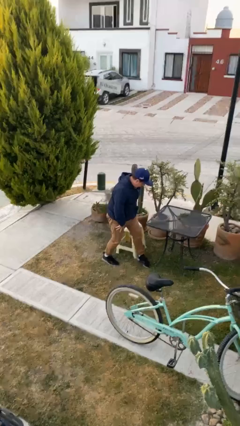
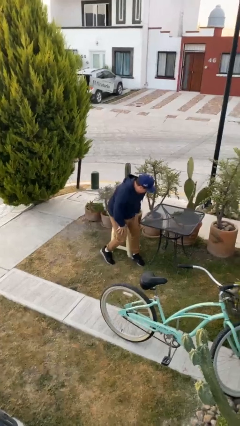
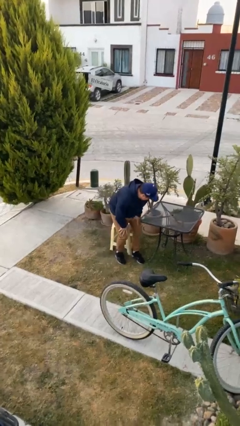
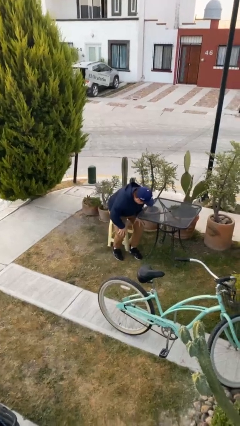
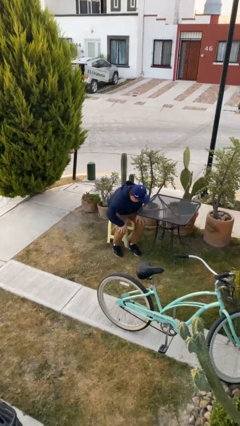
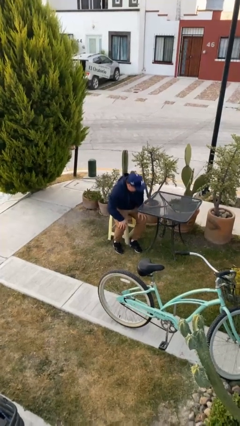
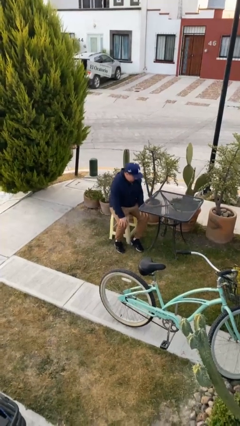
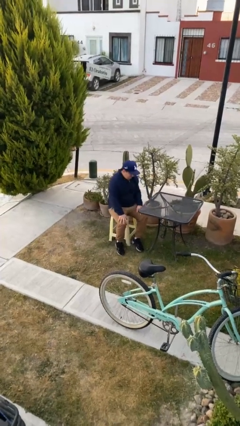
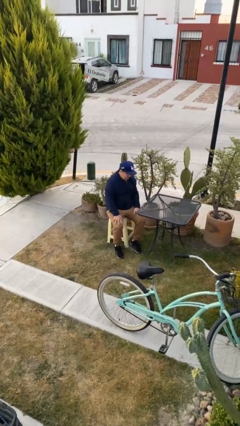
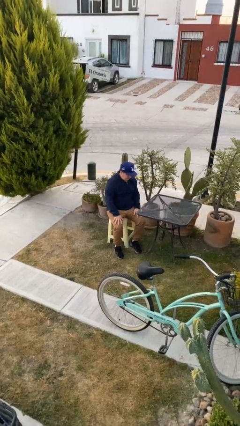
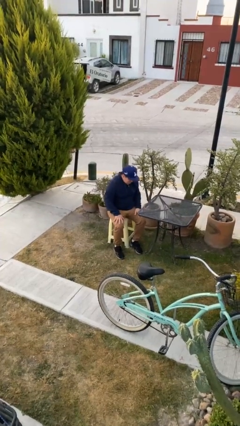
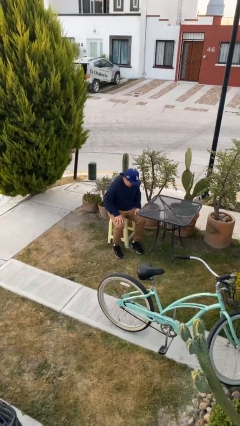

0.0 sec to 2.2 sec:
person sits down

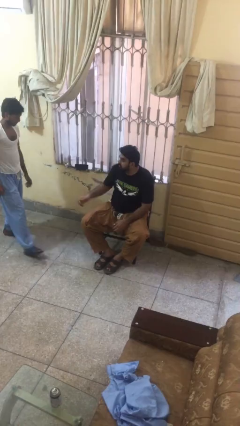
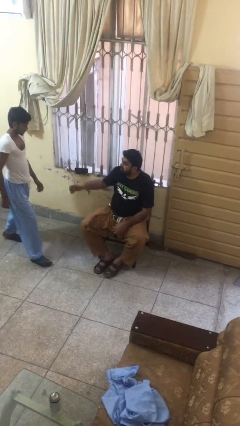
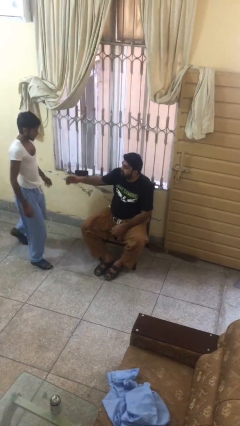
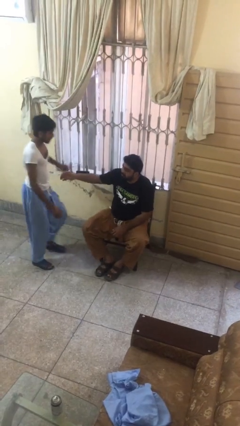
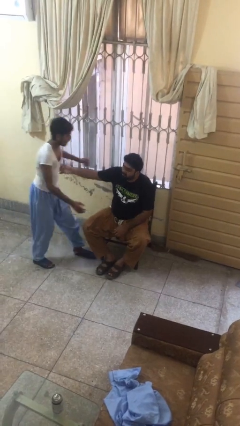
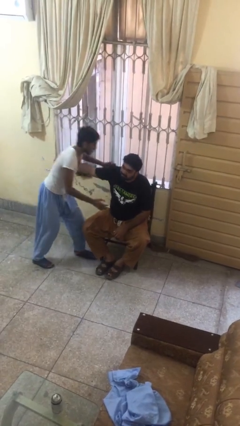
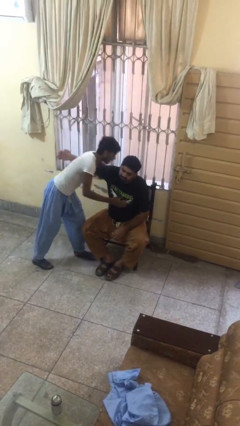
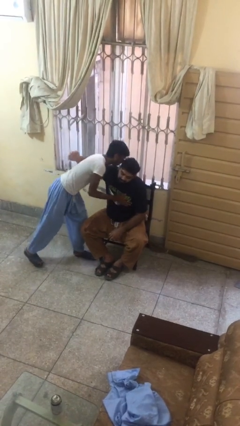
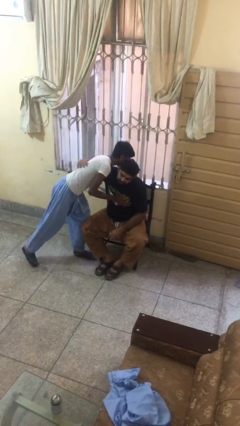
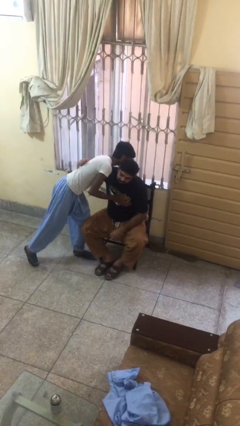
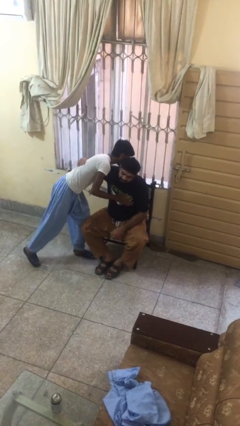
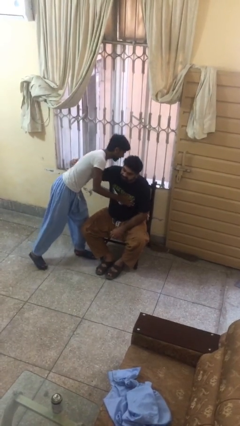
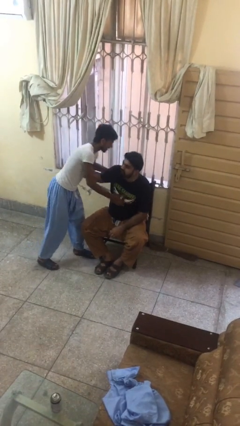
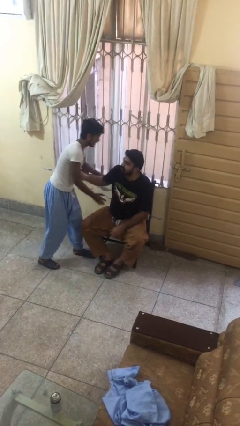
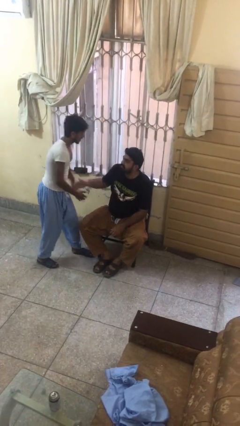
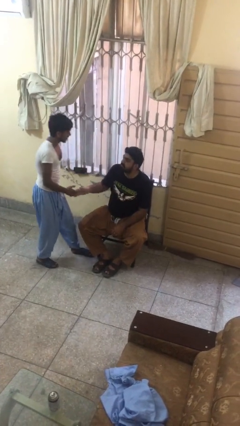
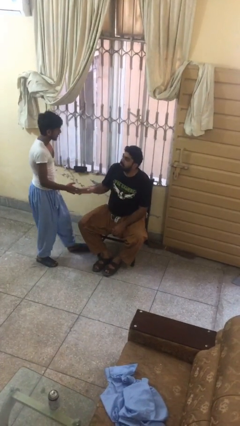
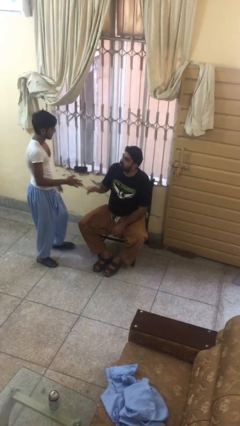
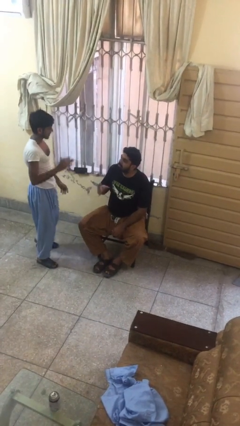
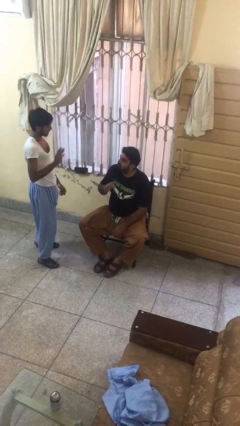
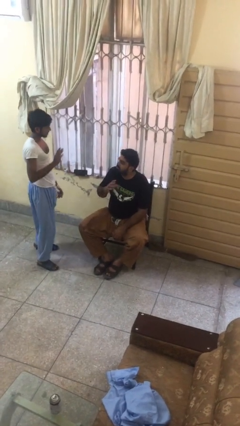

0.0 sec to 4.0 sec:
person embraces person

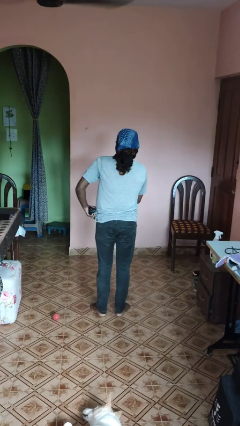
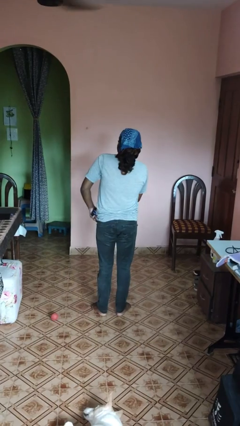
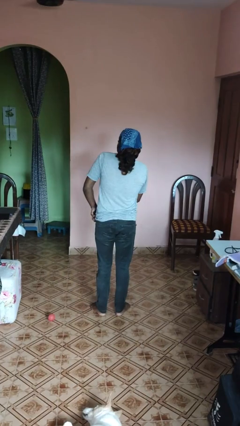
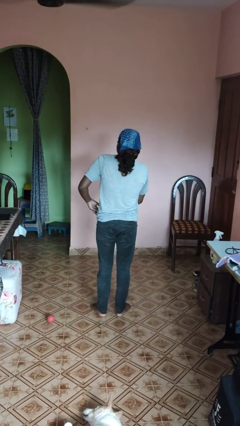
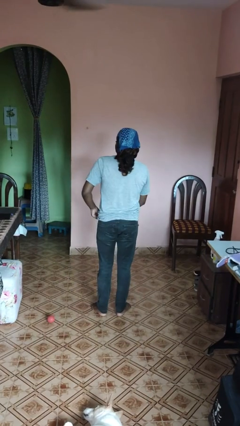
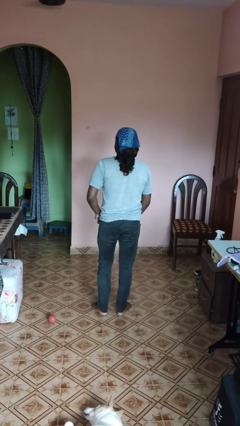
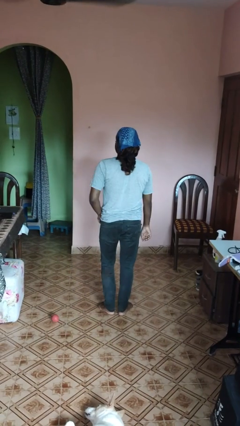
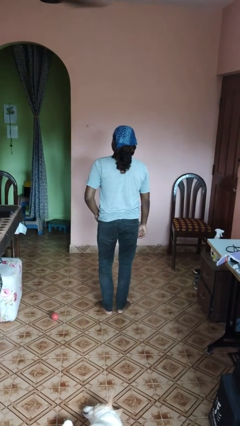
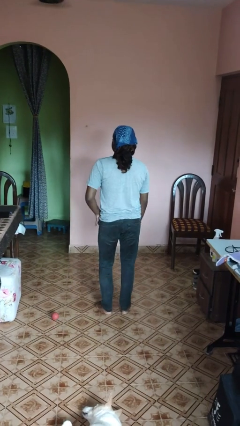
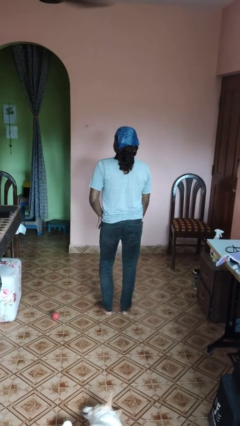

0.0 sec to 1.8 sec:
person puts phone into pocket

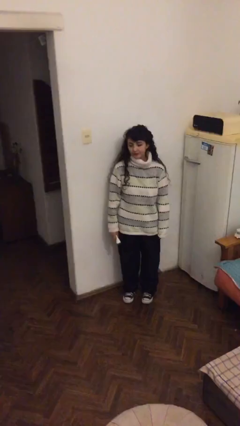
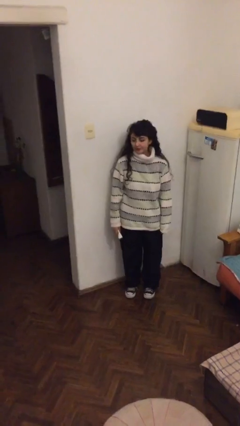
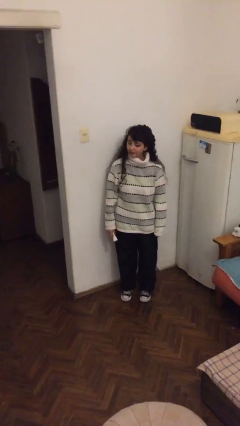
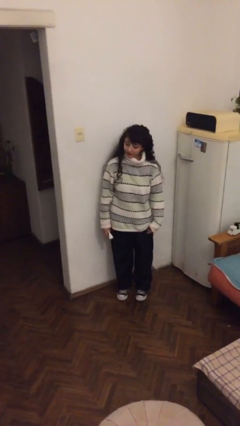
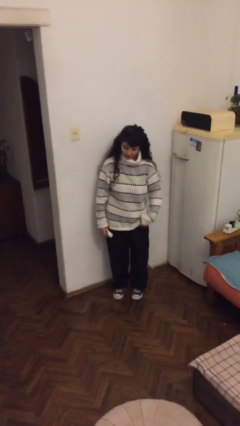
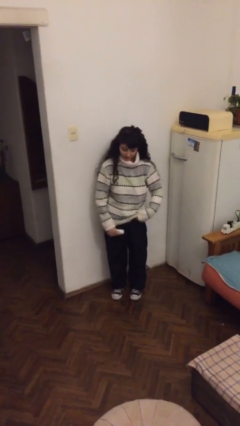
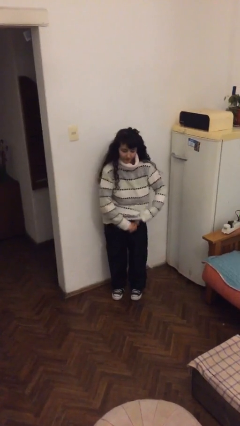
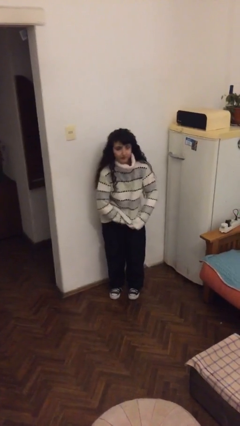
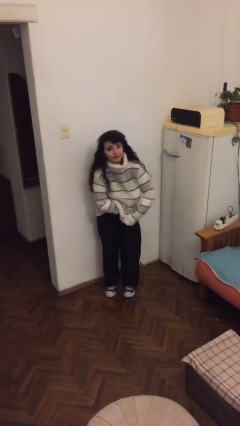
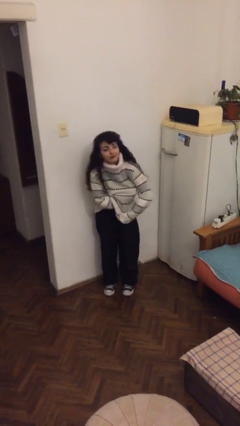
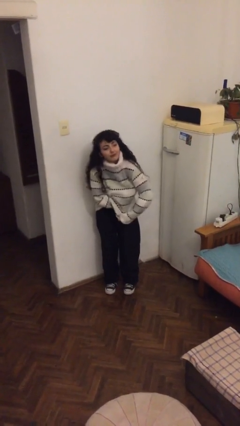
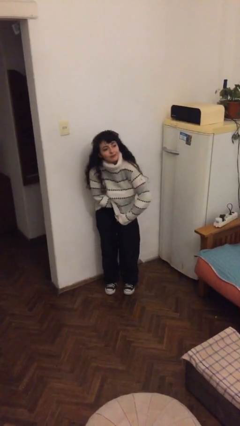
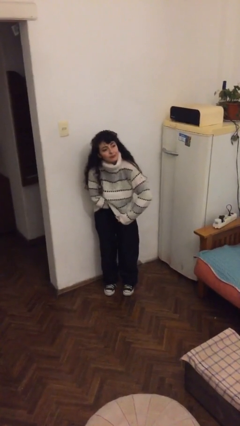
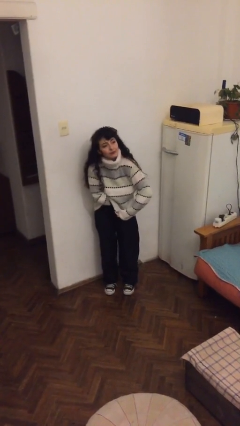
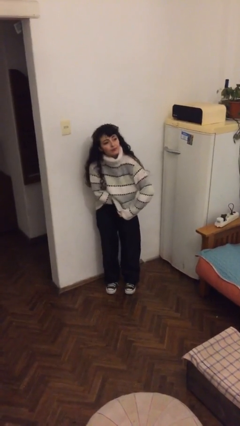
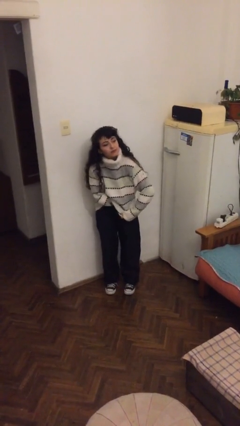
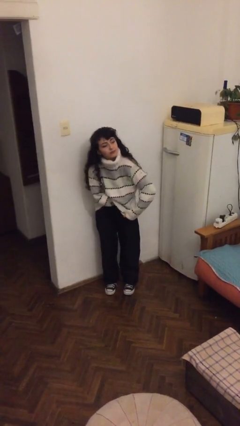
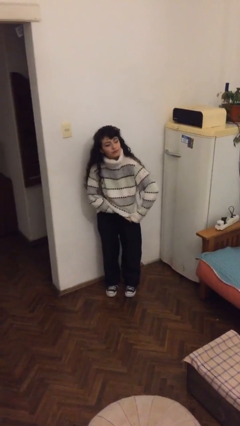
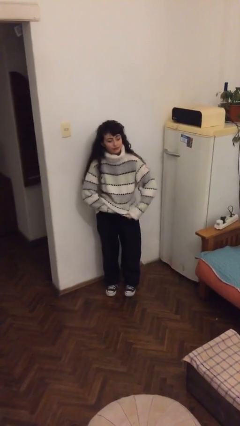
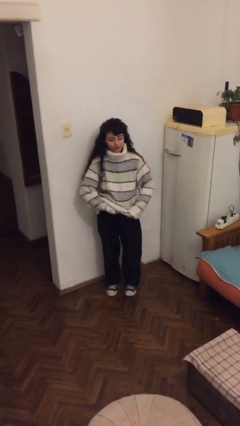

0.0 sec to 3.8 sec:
person applies deodorant

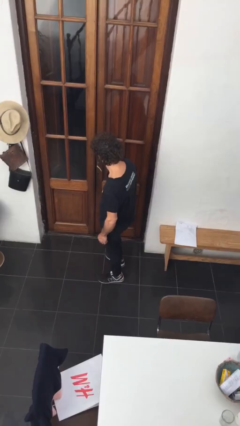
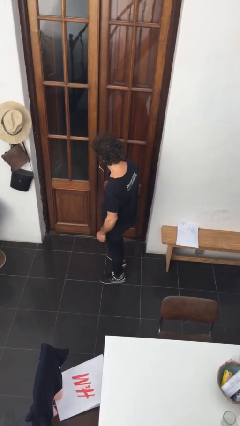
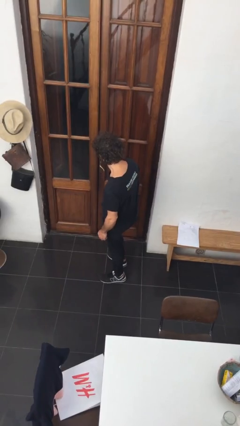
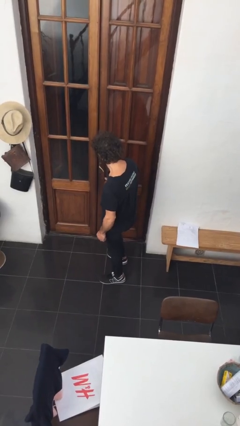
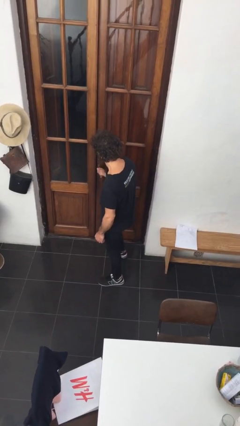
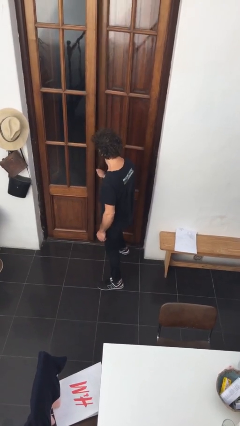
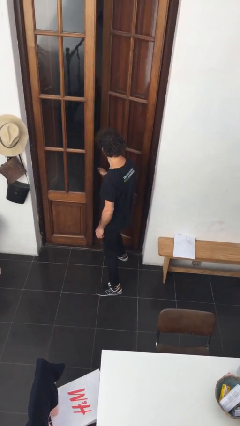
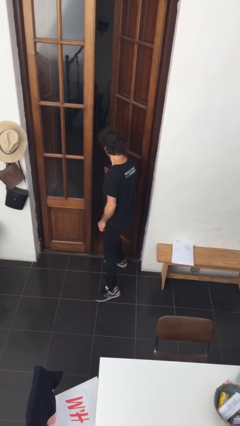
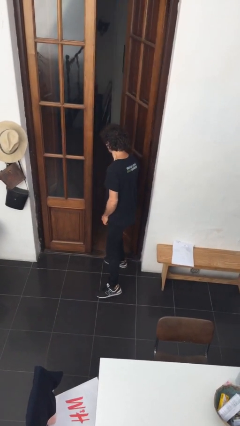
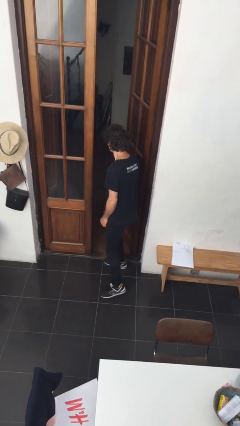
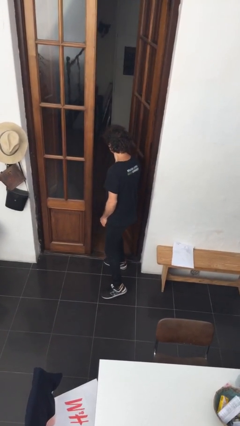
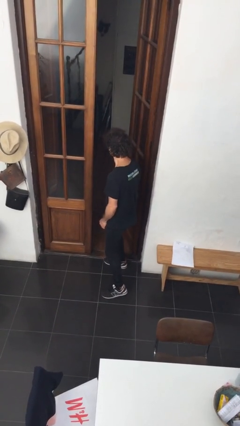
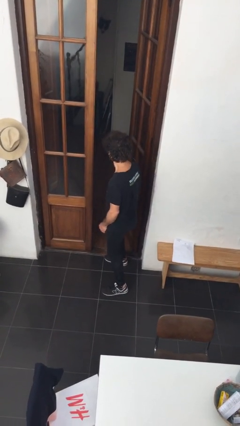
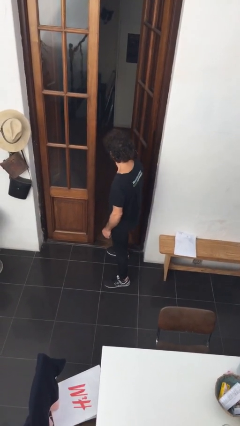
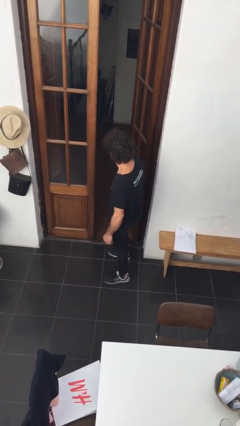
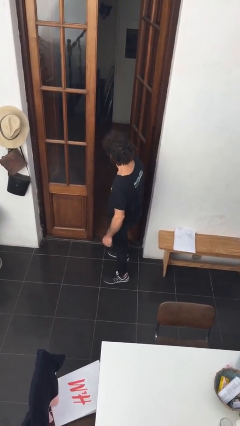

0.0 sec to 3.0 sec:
person opens facility door

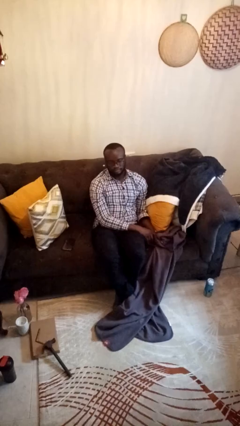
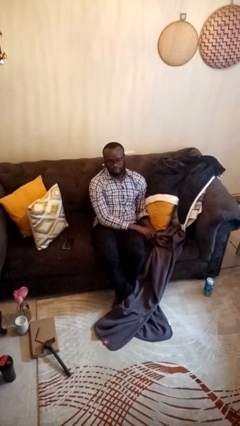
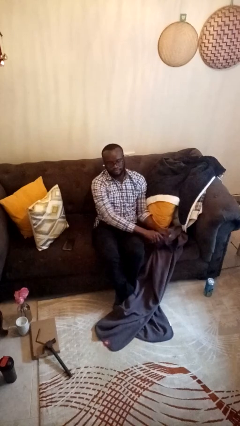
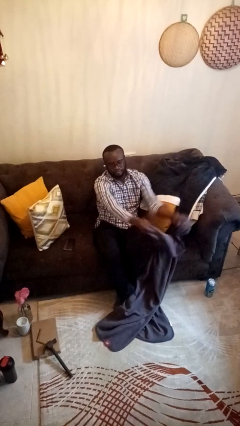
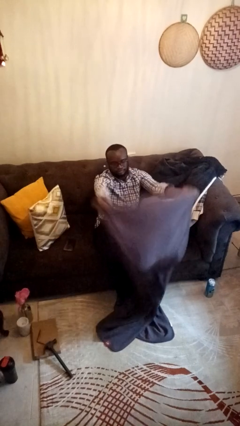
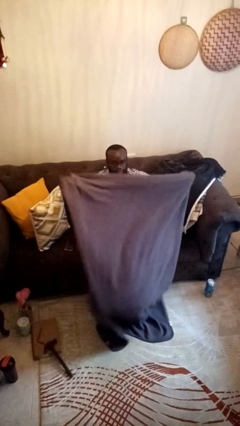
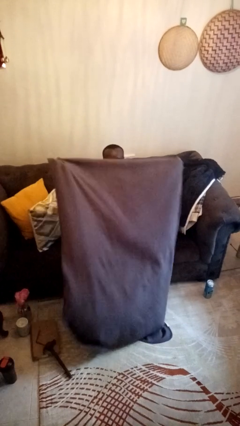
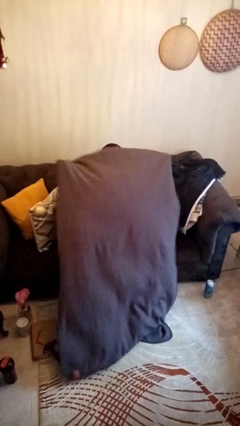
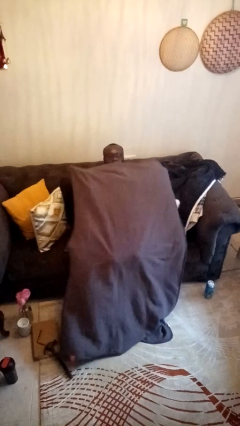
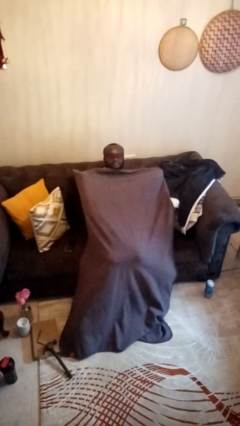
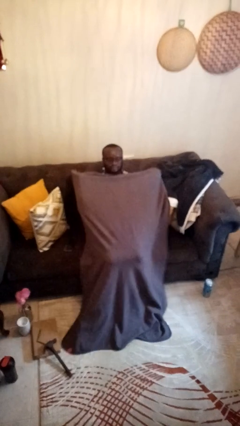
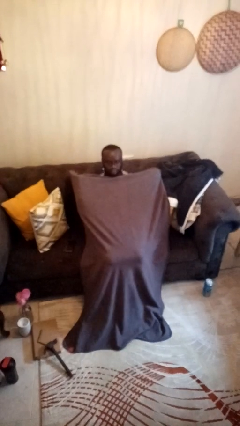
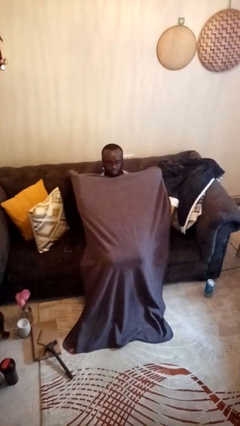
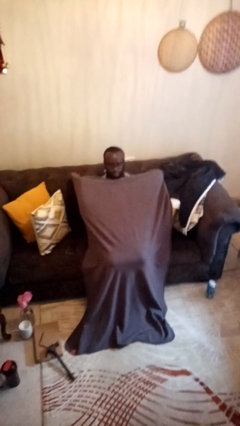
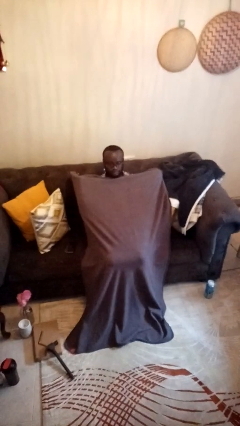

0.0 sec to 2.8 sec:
person covers with blanket
